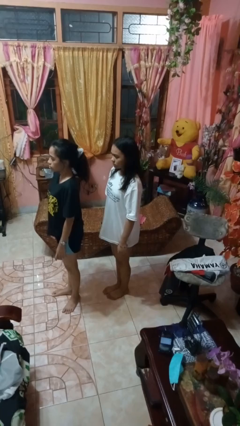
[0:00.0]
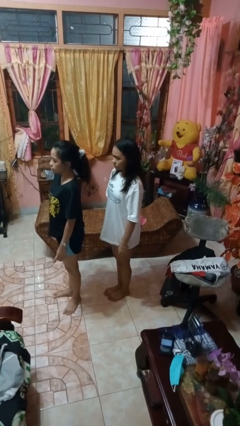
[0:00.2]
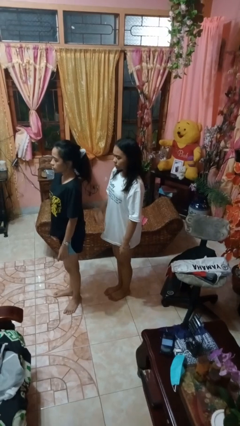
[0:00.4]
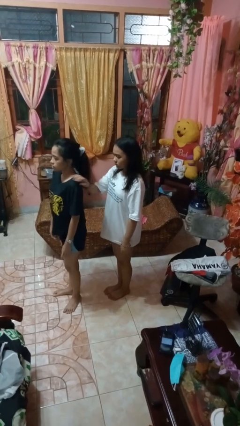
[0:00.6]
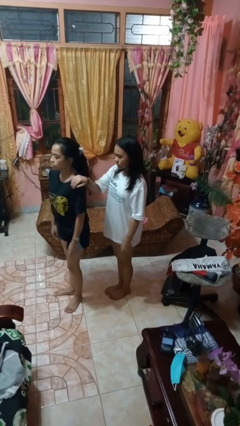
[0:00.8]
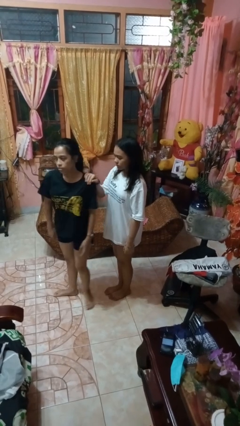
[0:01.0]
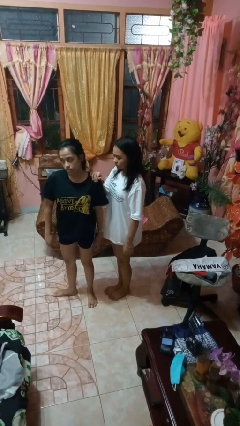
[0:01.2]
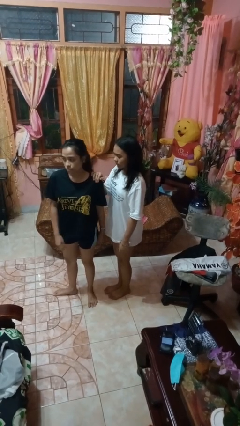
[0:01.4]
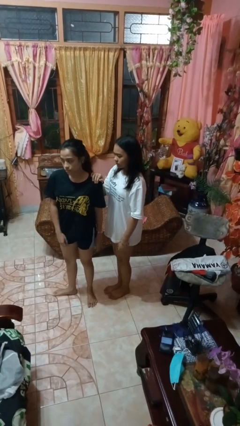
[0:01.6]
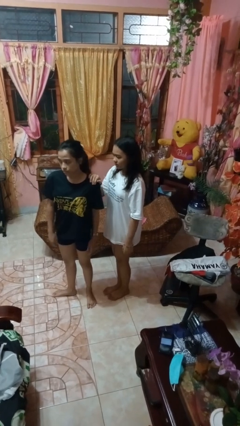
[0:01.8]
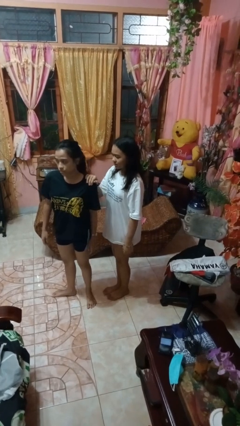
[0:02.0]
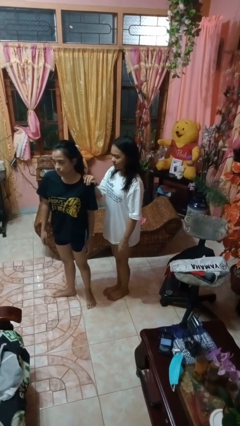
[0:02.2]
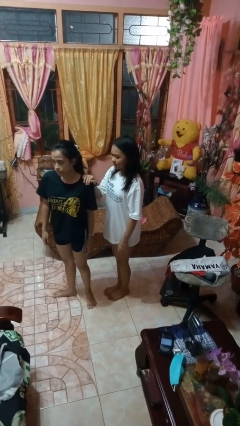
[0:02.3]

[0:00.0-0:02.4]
person grabs person by shoulder

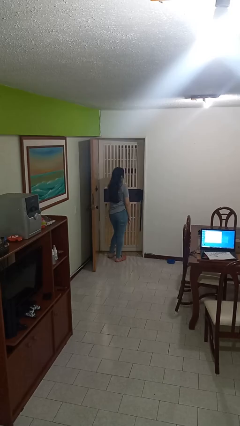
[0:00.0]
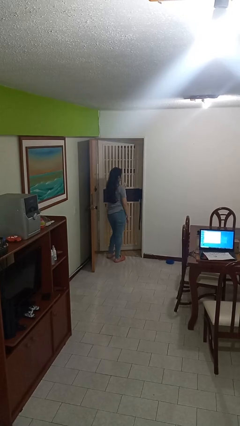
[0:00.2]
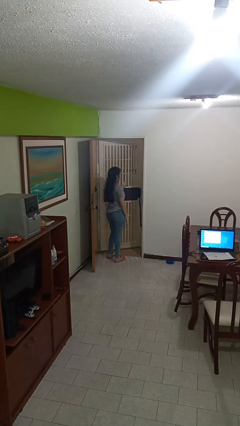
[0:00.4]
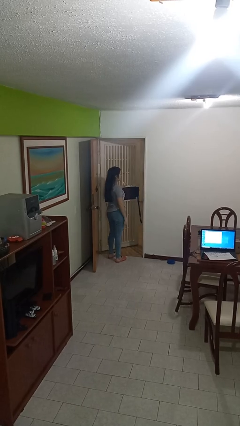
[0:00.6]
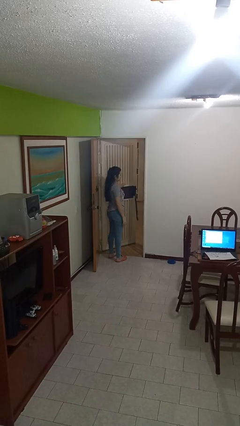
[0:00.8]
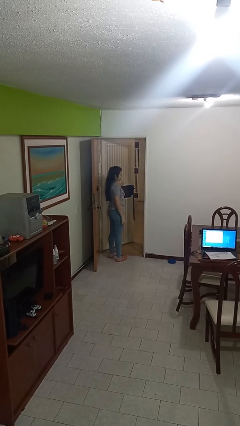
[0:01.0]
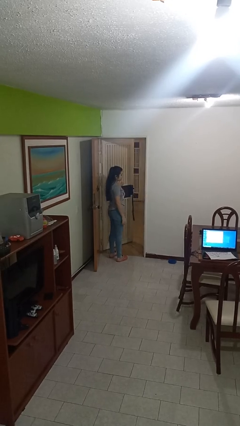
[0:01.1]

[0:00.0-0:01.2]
person opens facility door

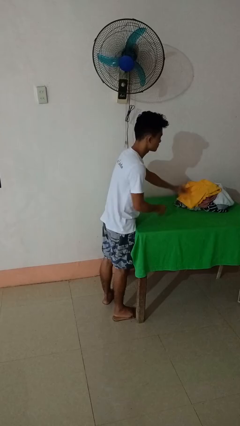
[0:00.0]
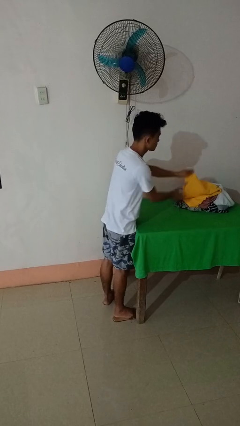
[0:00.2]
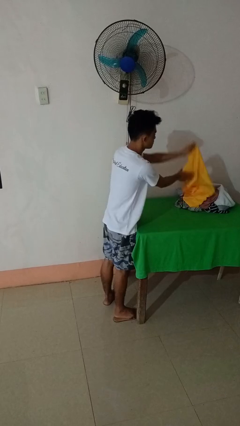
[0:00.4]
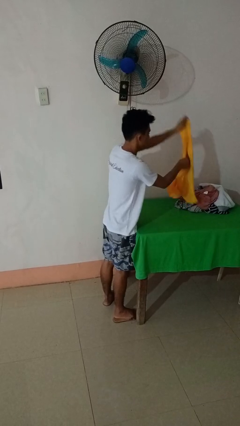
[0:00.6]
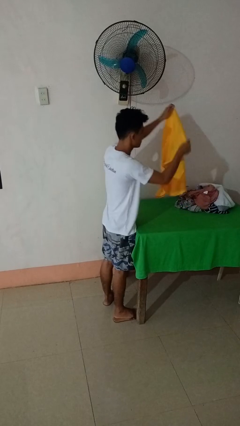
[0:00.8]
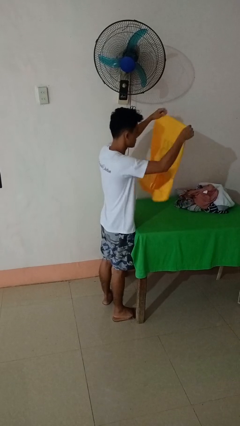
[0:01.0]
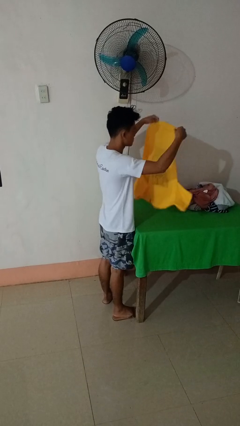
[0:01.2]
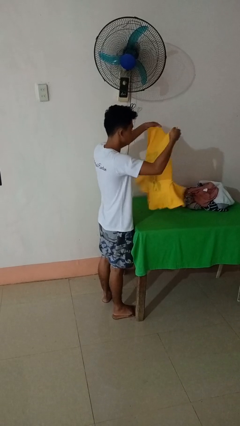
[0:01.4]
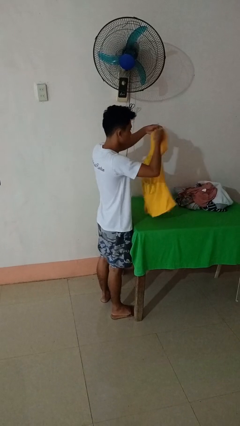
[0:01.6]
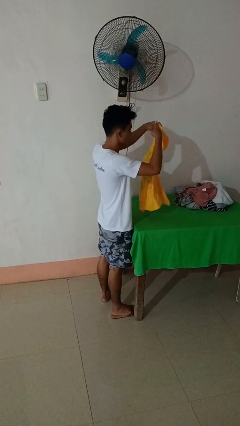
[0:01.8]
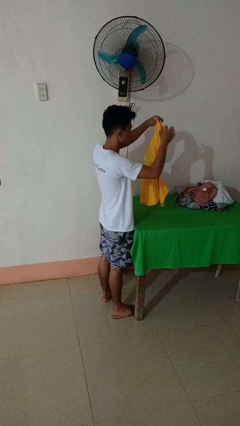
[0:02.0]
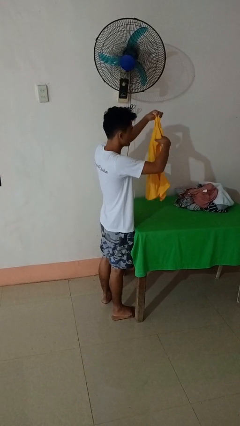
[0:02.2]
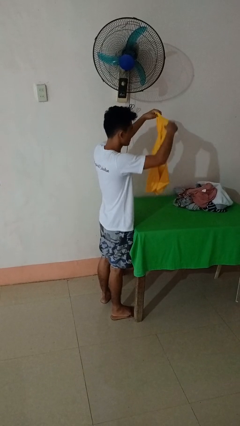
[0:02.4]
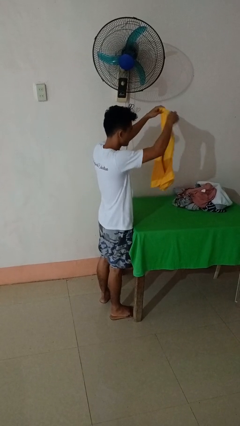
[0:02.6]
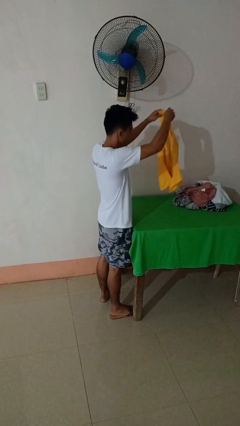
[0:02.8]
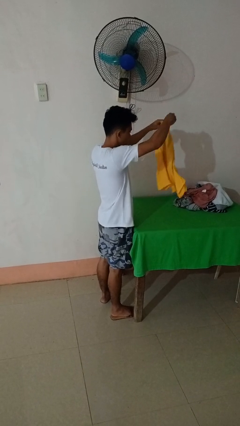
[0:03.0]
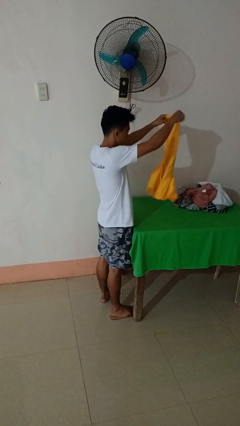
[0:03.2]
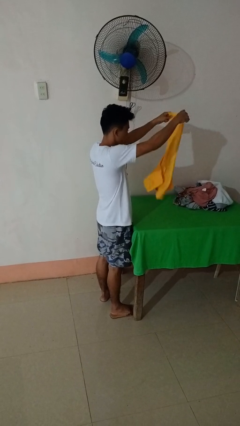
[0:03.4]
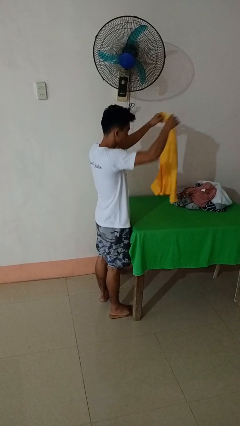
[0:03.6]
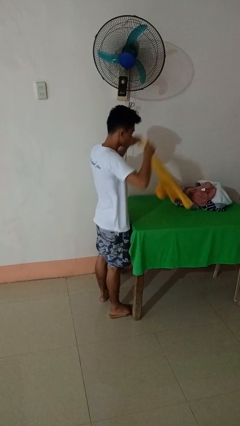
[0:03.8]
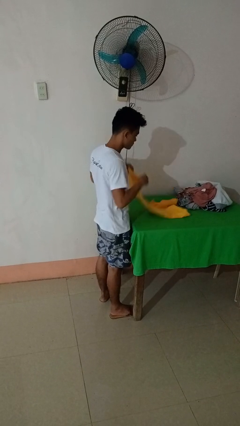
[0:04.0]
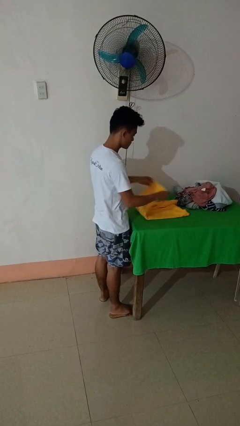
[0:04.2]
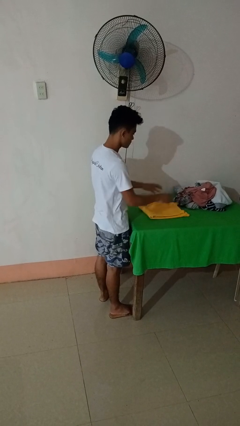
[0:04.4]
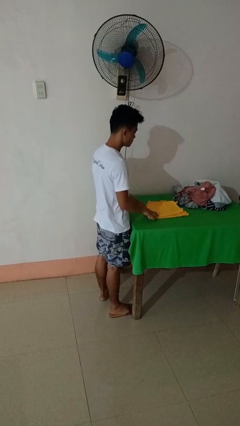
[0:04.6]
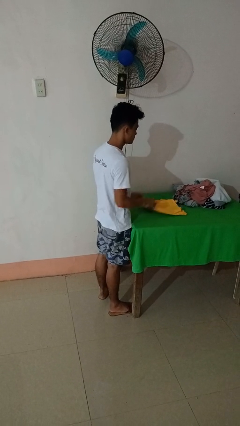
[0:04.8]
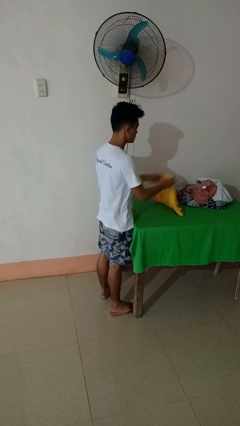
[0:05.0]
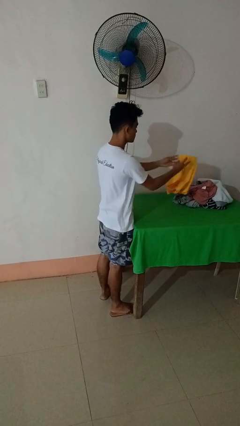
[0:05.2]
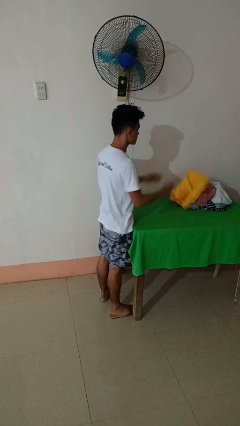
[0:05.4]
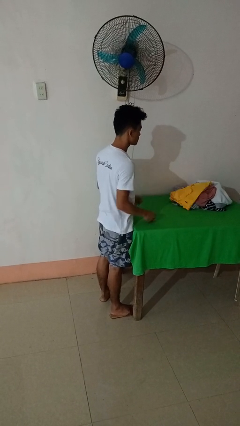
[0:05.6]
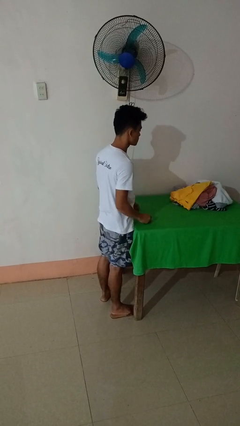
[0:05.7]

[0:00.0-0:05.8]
person folds shirt

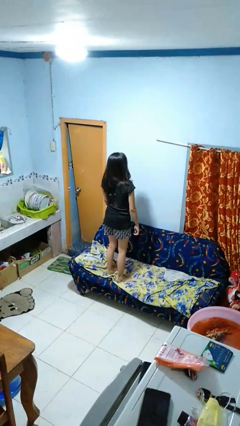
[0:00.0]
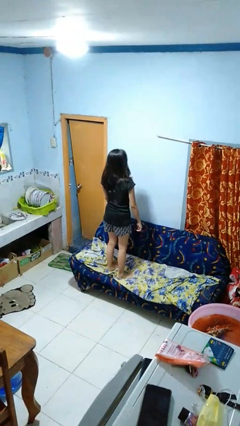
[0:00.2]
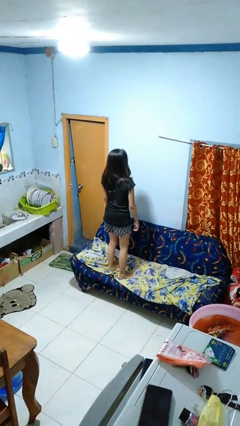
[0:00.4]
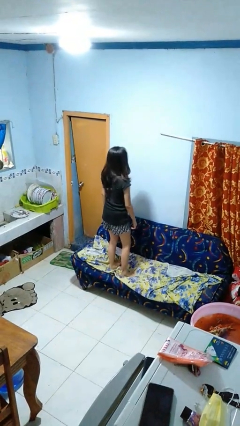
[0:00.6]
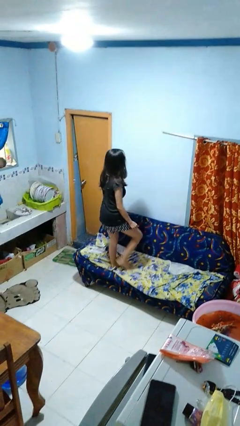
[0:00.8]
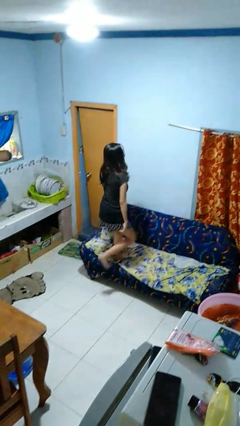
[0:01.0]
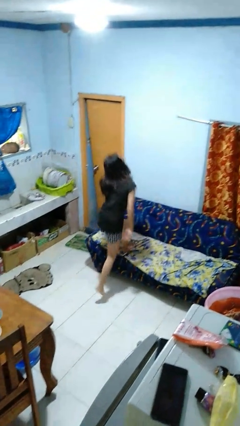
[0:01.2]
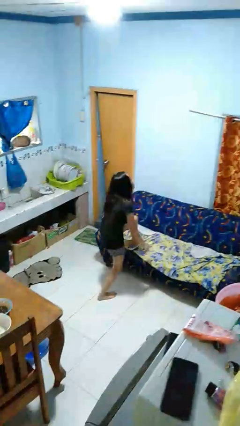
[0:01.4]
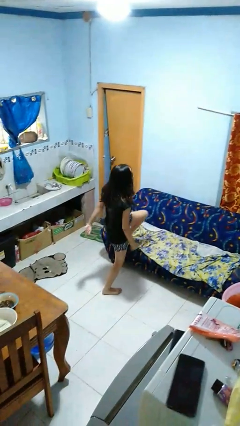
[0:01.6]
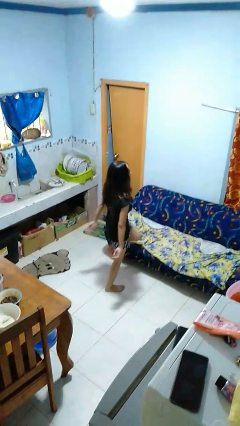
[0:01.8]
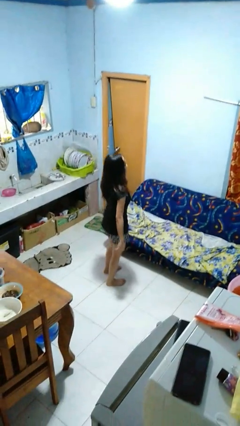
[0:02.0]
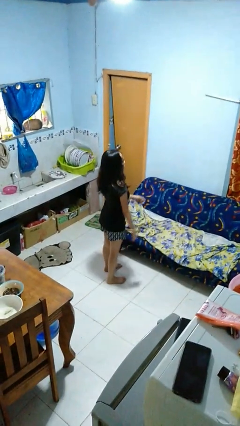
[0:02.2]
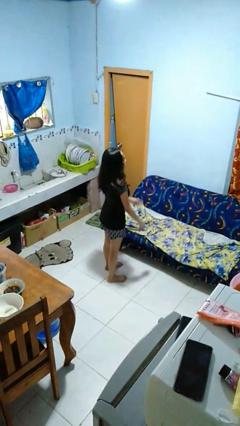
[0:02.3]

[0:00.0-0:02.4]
person climbs off couch

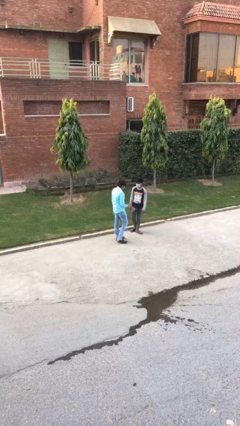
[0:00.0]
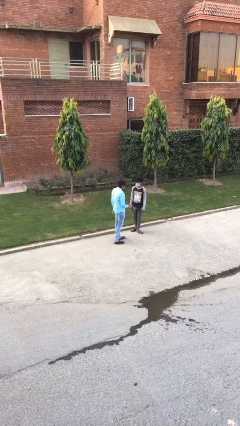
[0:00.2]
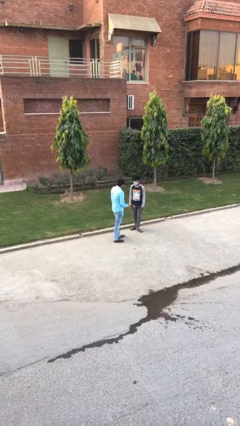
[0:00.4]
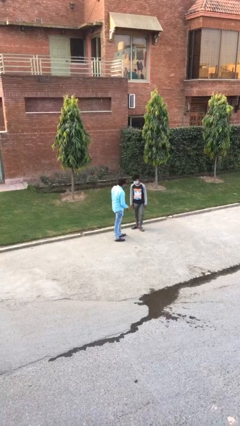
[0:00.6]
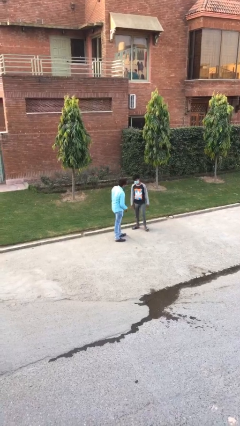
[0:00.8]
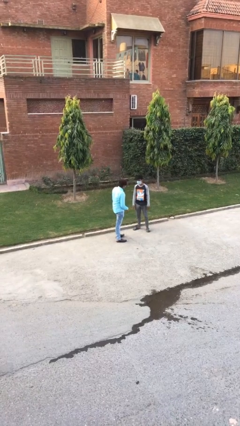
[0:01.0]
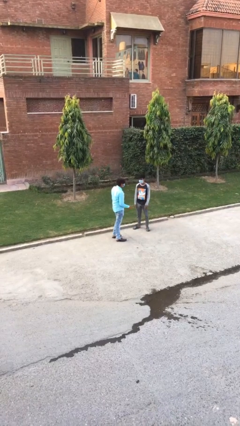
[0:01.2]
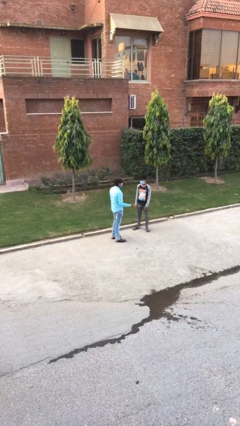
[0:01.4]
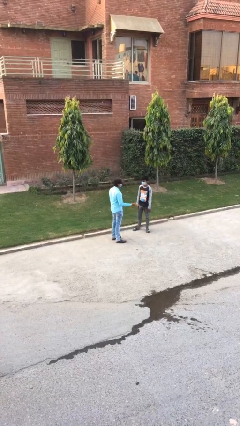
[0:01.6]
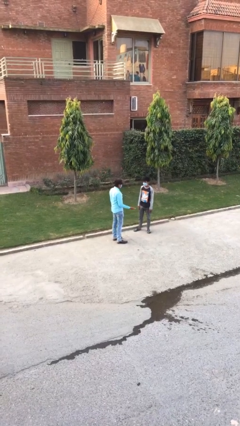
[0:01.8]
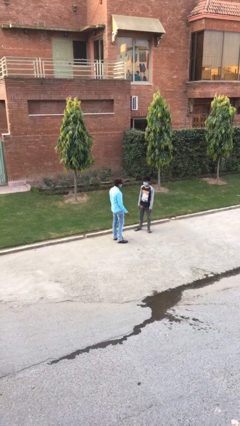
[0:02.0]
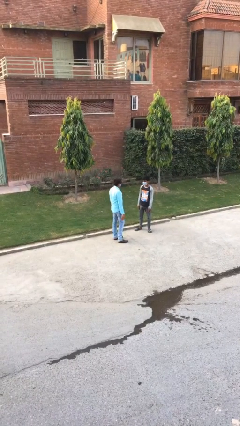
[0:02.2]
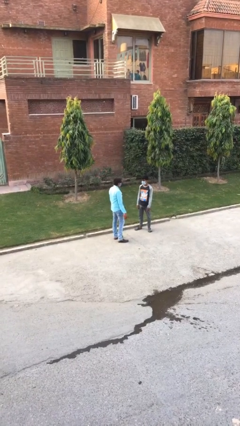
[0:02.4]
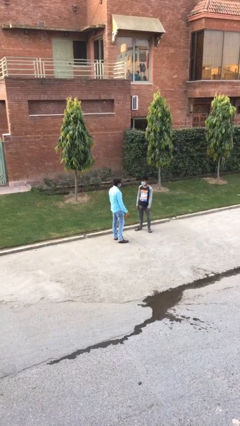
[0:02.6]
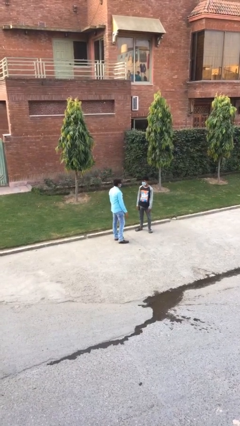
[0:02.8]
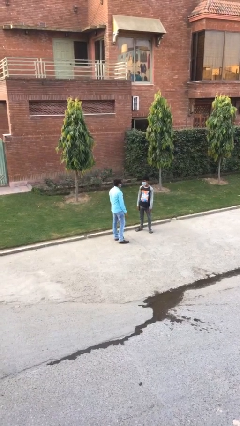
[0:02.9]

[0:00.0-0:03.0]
person talks to person

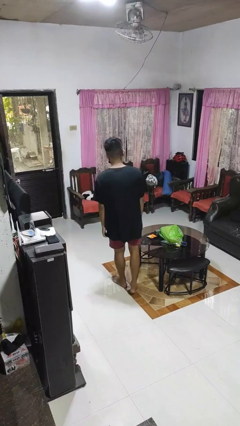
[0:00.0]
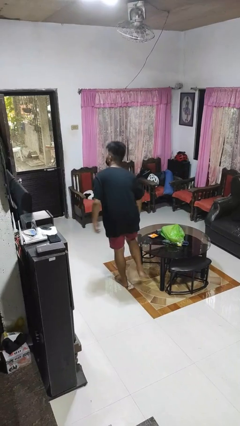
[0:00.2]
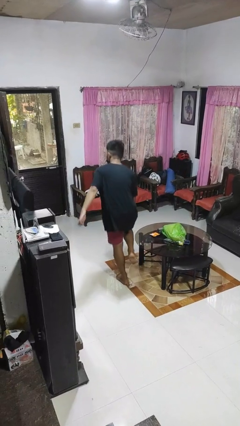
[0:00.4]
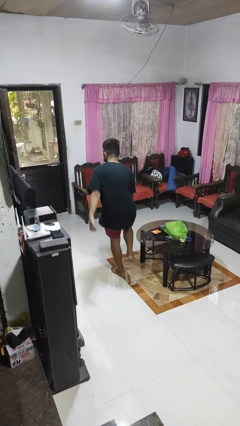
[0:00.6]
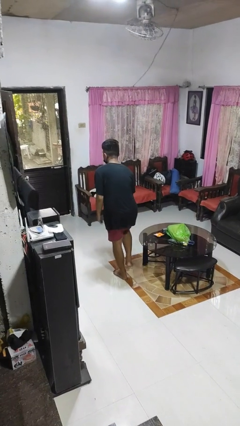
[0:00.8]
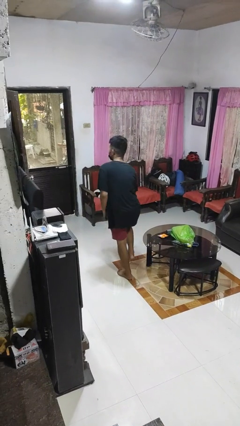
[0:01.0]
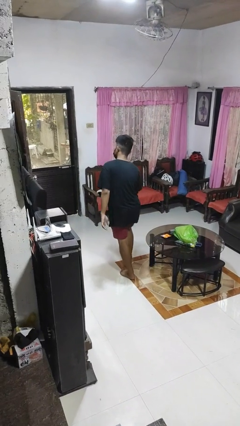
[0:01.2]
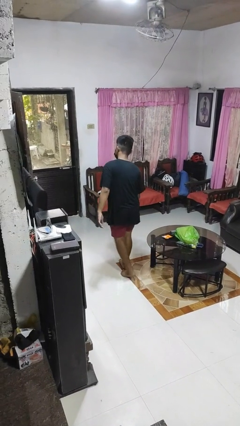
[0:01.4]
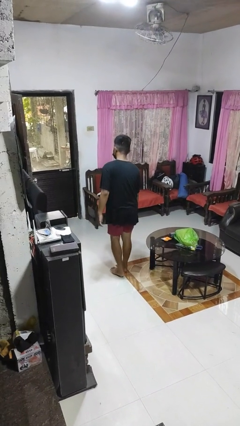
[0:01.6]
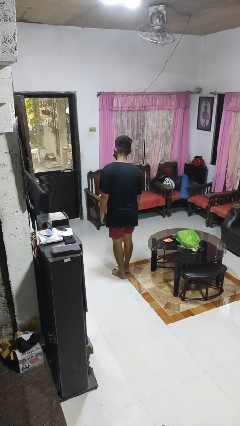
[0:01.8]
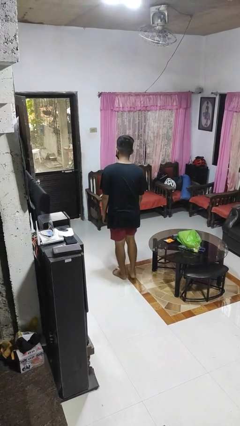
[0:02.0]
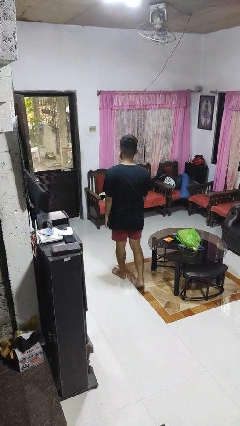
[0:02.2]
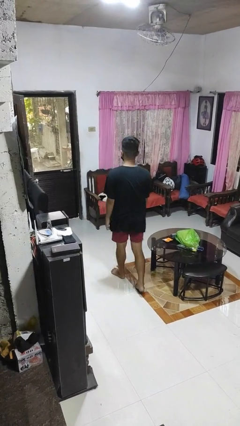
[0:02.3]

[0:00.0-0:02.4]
person bumps into table
